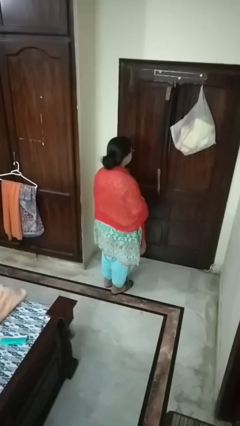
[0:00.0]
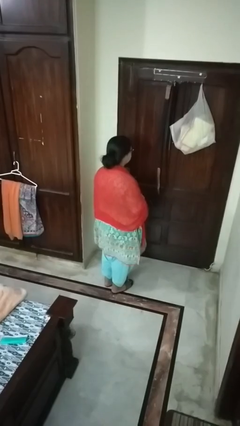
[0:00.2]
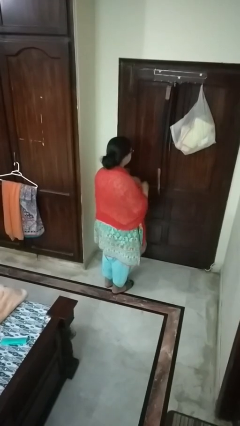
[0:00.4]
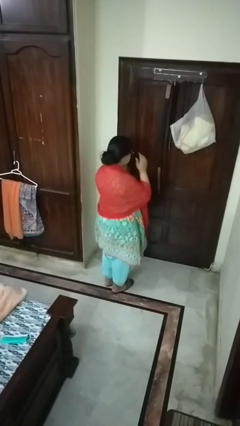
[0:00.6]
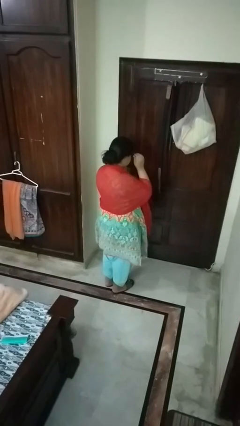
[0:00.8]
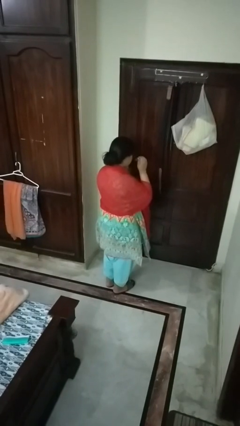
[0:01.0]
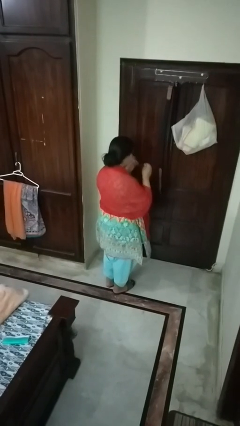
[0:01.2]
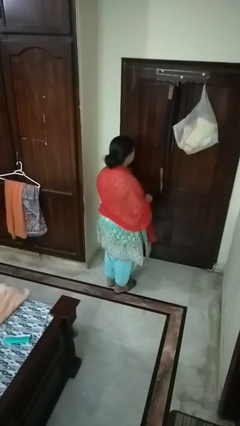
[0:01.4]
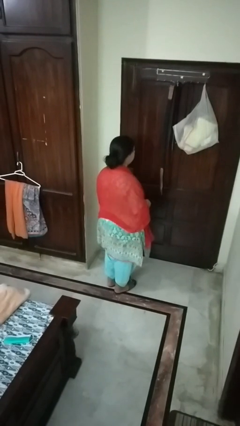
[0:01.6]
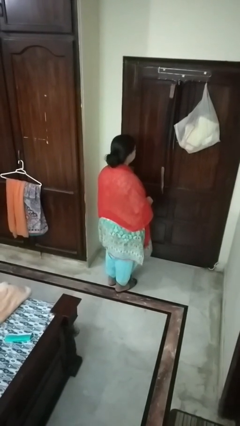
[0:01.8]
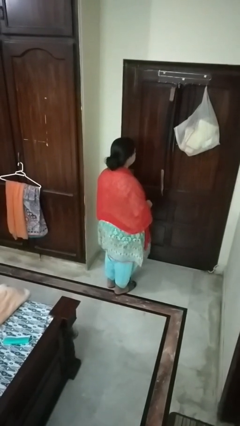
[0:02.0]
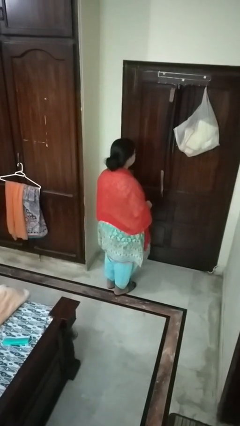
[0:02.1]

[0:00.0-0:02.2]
person takes off glasses

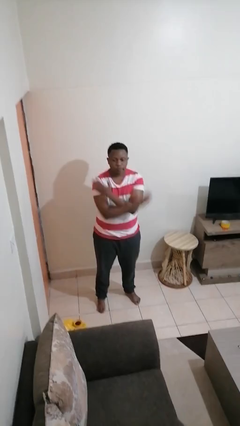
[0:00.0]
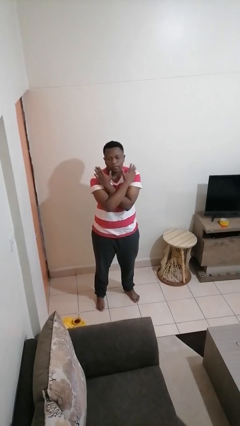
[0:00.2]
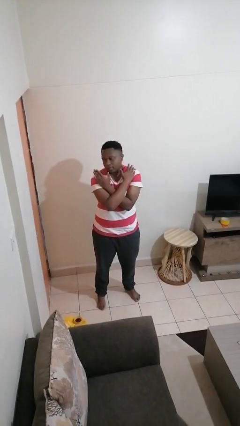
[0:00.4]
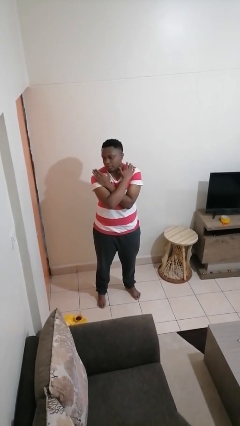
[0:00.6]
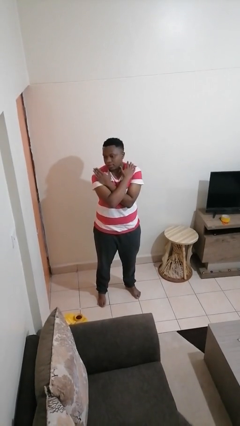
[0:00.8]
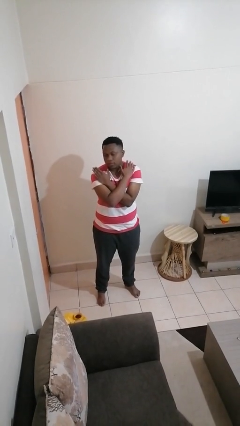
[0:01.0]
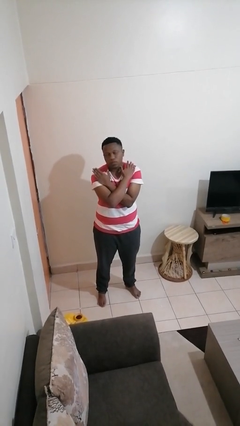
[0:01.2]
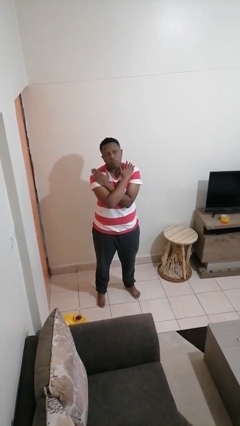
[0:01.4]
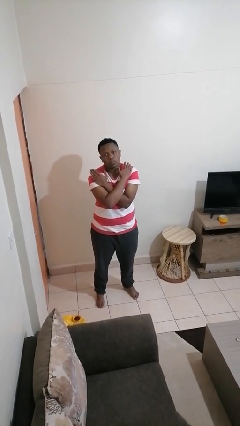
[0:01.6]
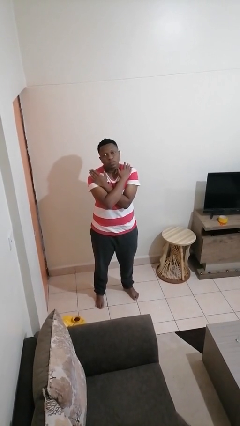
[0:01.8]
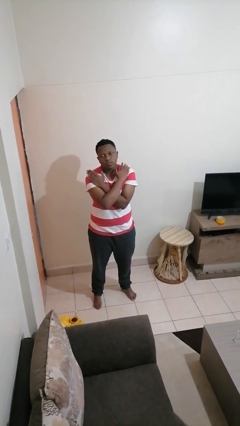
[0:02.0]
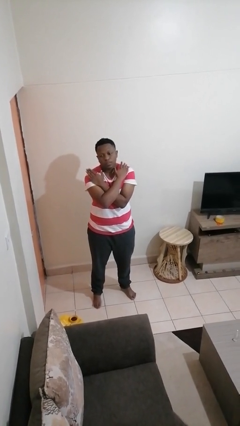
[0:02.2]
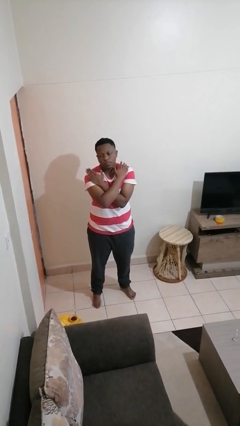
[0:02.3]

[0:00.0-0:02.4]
person gestures arms x

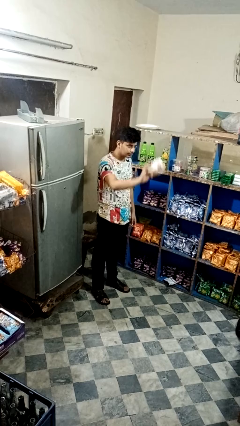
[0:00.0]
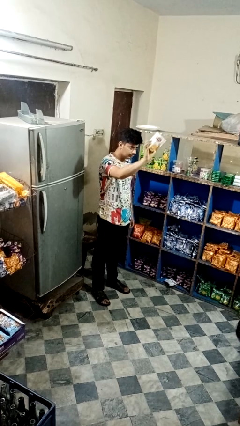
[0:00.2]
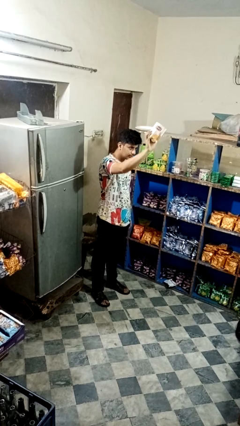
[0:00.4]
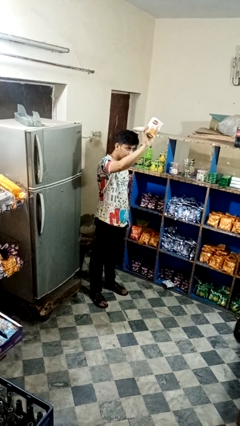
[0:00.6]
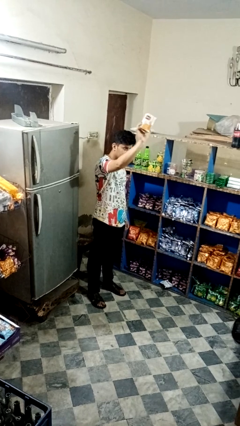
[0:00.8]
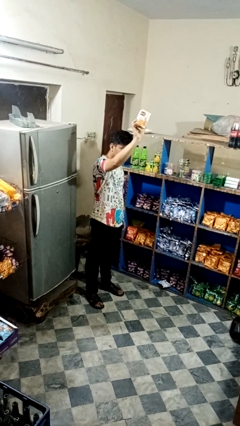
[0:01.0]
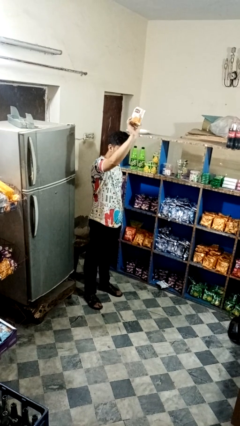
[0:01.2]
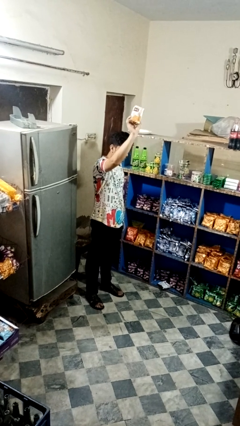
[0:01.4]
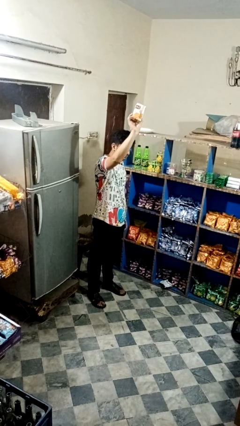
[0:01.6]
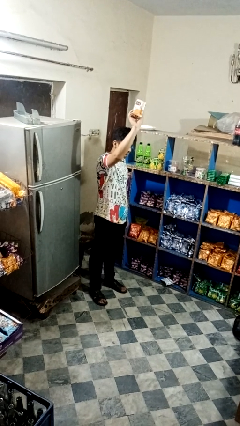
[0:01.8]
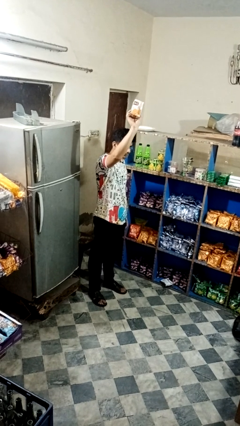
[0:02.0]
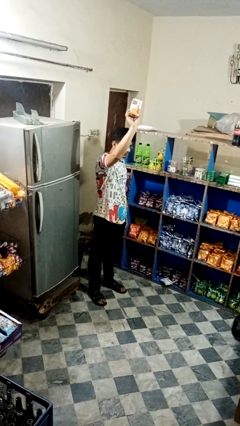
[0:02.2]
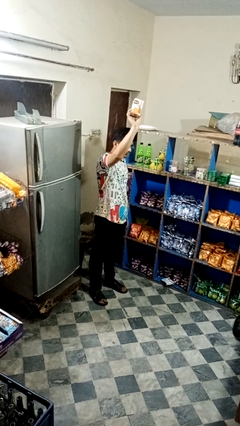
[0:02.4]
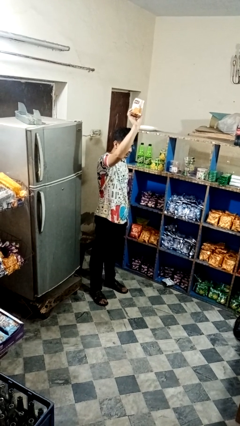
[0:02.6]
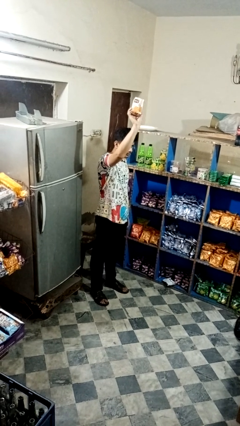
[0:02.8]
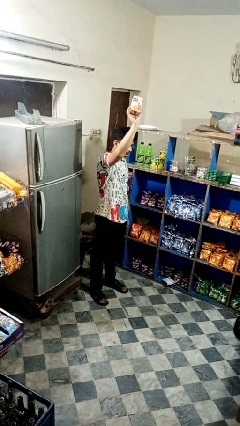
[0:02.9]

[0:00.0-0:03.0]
person holds object above head

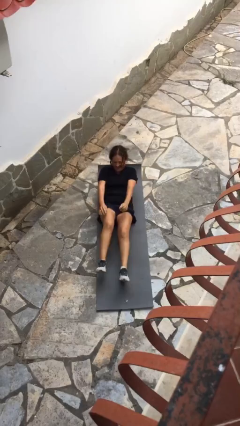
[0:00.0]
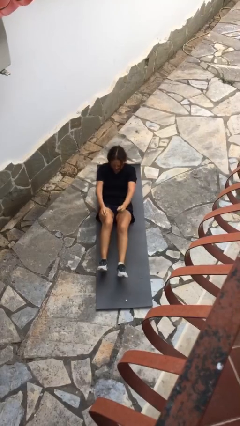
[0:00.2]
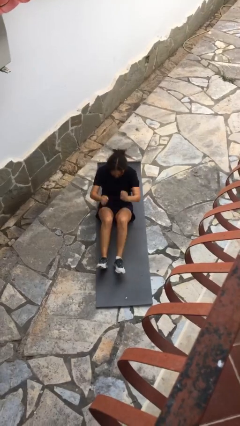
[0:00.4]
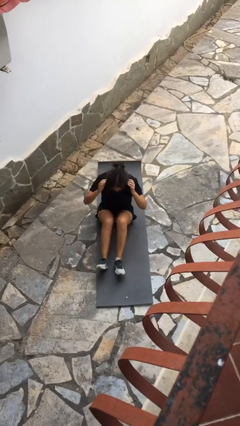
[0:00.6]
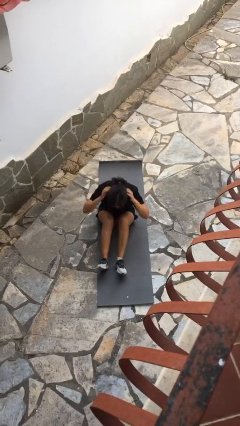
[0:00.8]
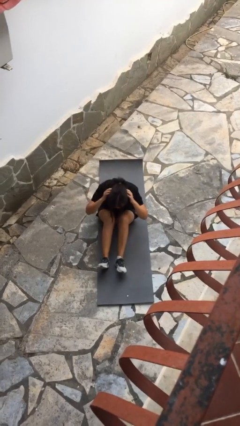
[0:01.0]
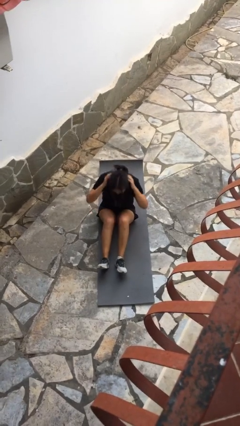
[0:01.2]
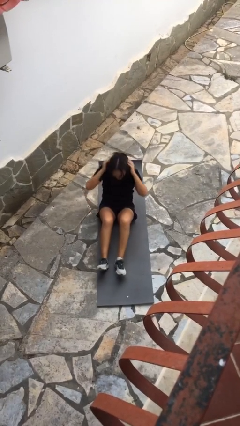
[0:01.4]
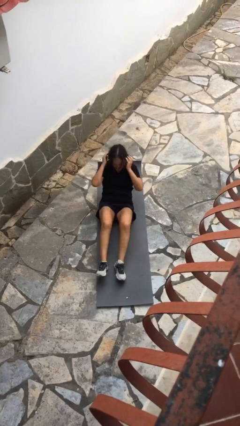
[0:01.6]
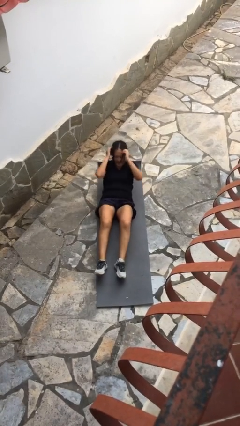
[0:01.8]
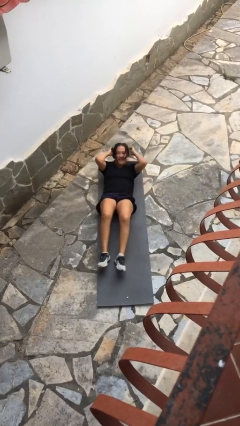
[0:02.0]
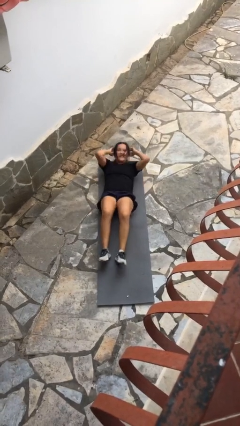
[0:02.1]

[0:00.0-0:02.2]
person exercises with situp

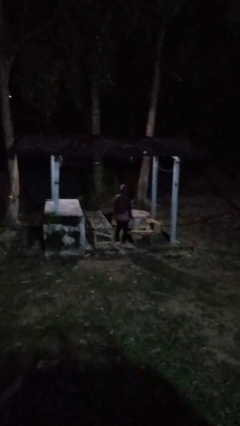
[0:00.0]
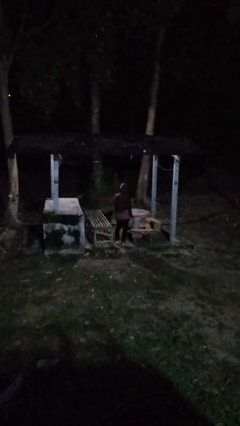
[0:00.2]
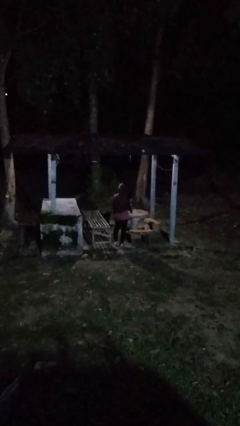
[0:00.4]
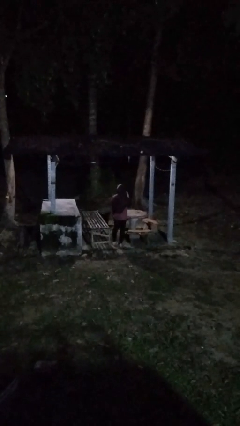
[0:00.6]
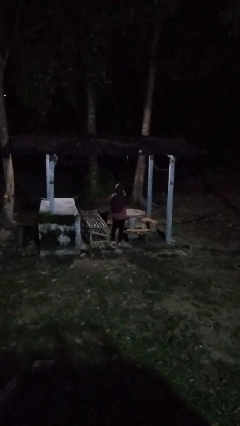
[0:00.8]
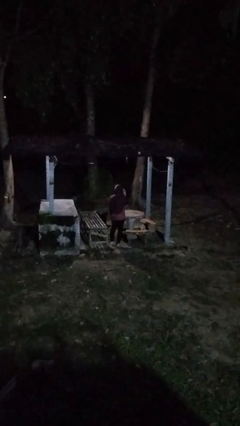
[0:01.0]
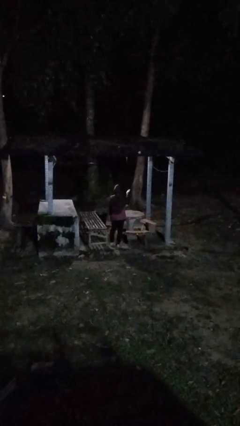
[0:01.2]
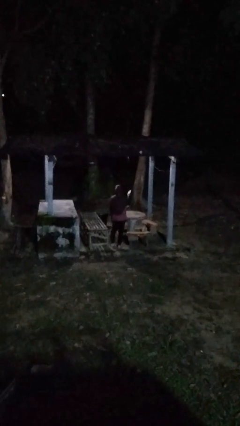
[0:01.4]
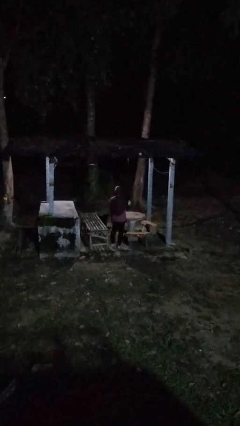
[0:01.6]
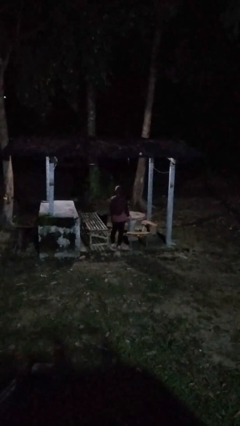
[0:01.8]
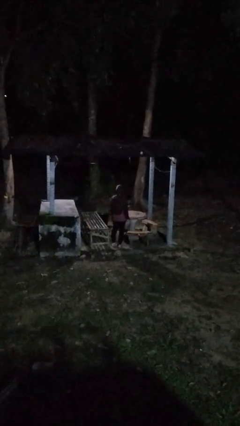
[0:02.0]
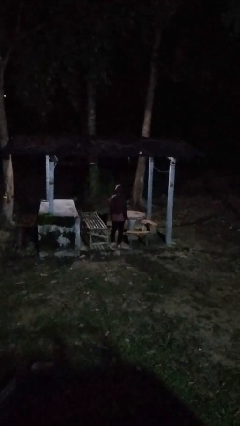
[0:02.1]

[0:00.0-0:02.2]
person gestures blow kiss

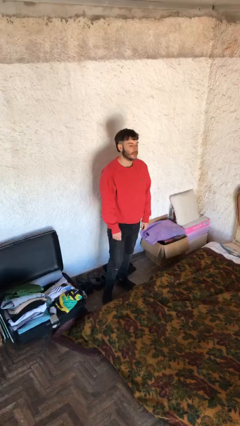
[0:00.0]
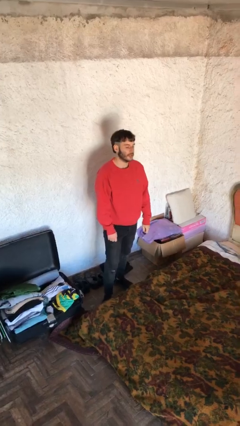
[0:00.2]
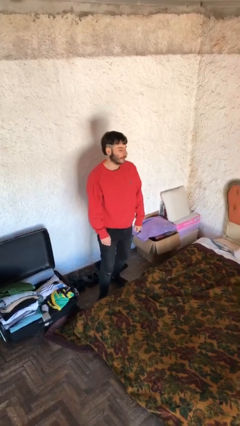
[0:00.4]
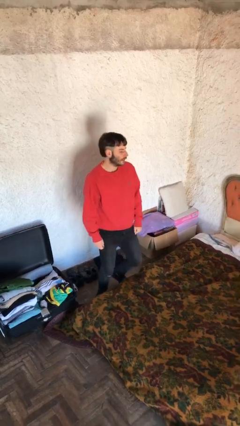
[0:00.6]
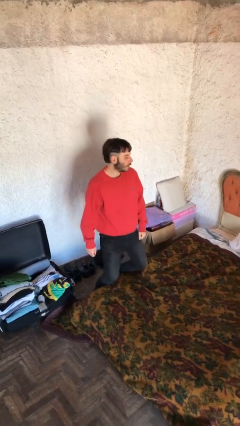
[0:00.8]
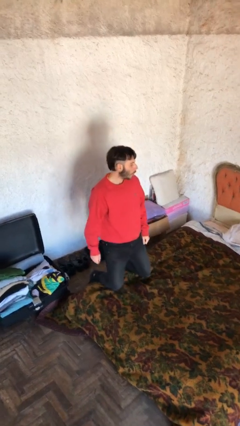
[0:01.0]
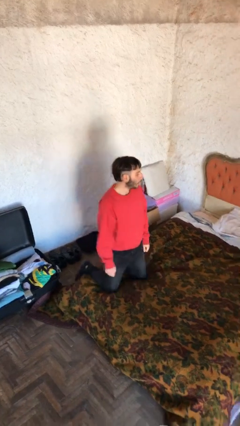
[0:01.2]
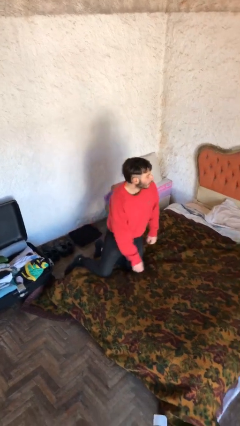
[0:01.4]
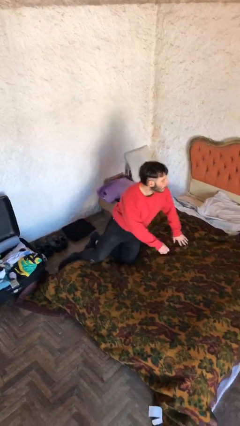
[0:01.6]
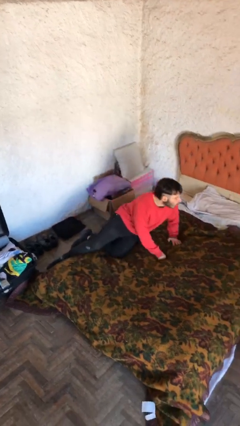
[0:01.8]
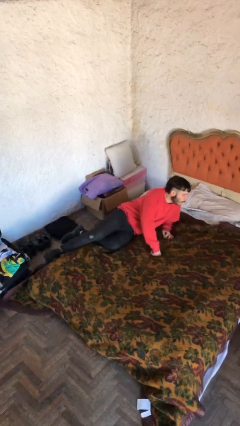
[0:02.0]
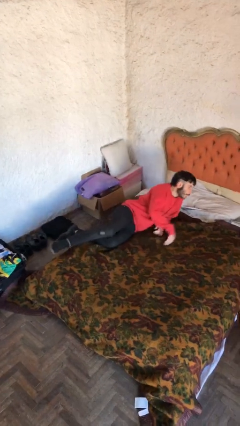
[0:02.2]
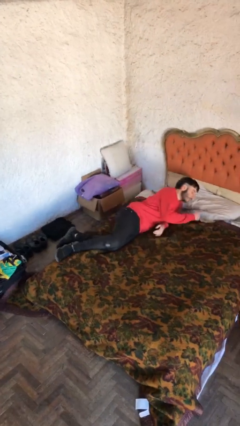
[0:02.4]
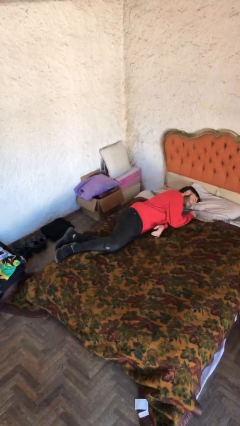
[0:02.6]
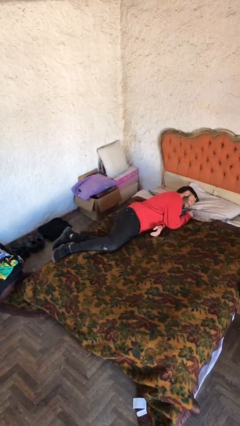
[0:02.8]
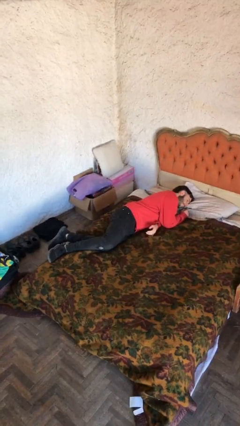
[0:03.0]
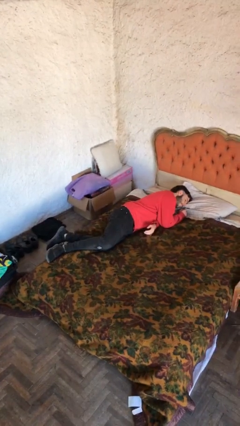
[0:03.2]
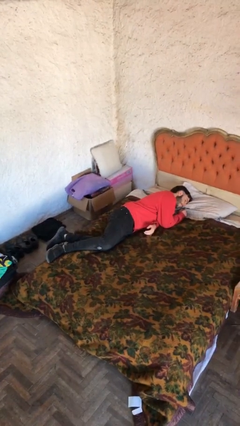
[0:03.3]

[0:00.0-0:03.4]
person lies down on bed

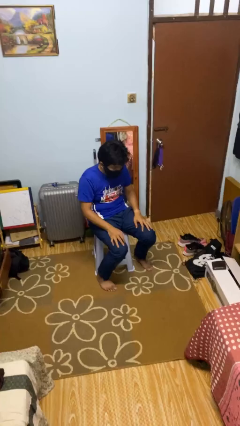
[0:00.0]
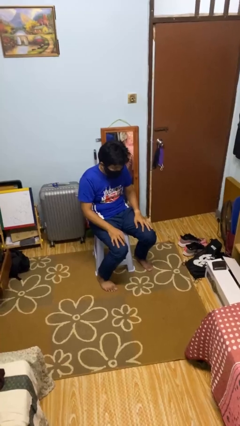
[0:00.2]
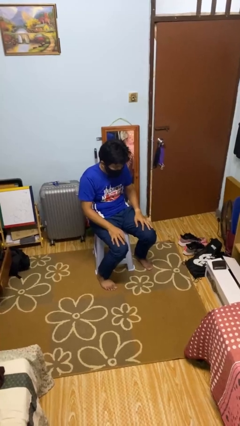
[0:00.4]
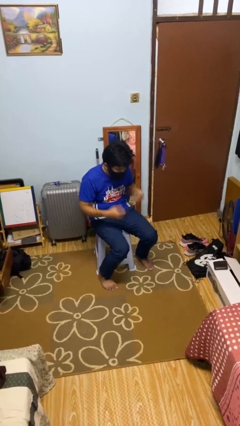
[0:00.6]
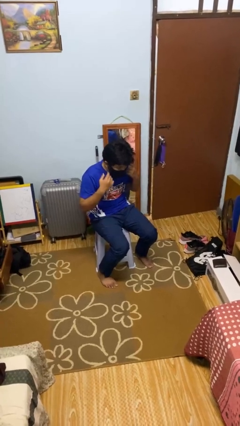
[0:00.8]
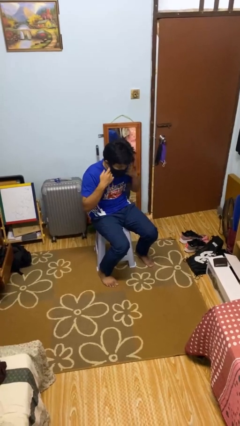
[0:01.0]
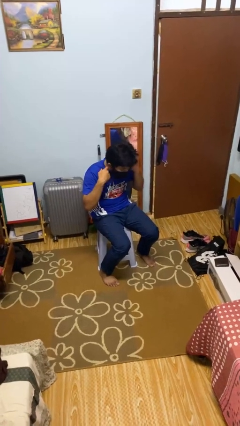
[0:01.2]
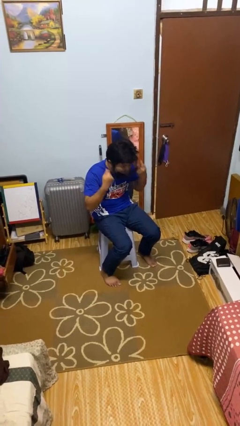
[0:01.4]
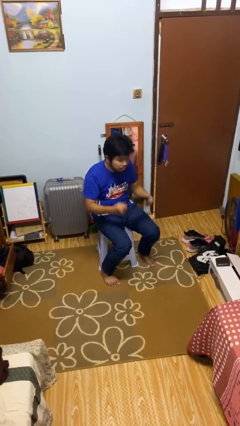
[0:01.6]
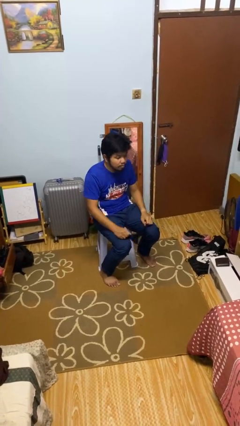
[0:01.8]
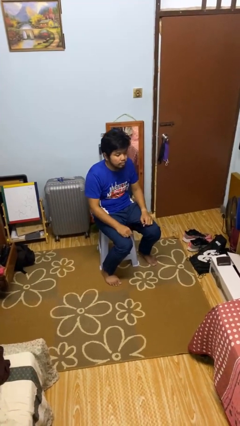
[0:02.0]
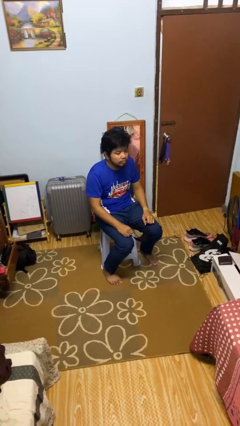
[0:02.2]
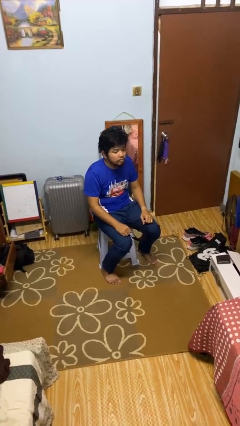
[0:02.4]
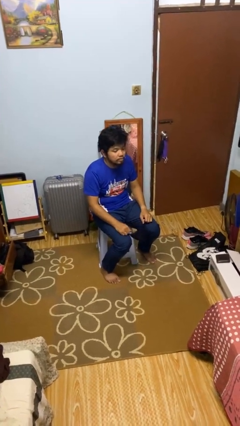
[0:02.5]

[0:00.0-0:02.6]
person takes off facemask
